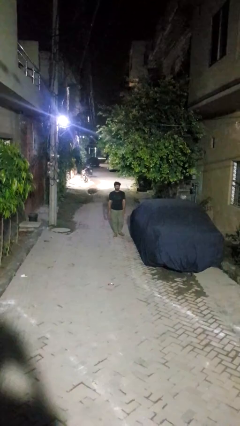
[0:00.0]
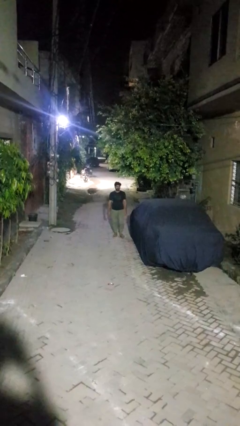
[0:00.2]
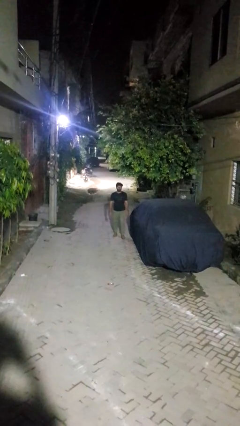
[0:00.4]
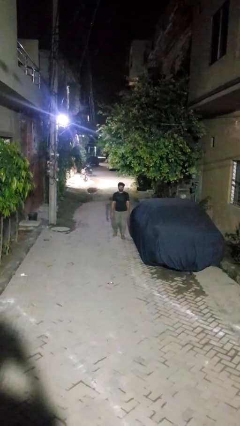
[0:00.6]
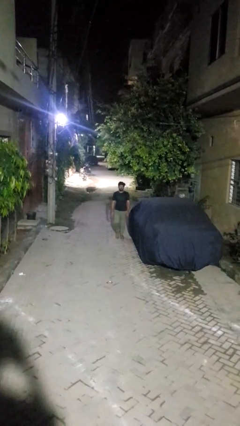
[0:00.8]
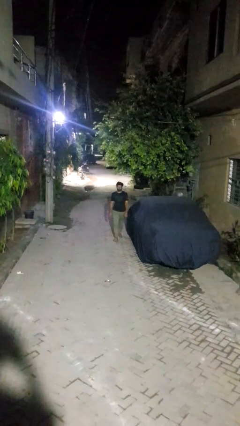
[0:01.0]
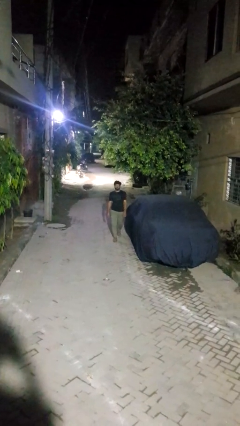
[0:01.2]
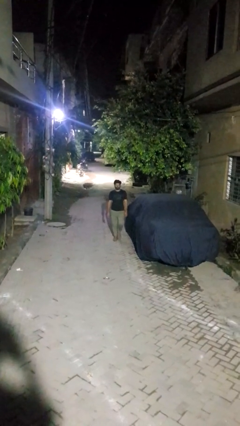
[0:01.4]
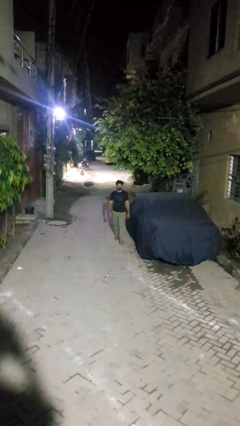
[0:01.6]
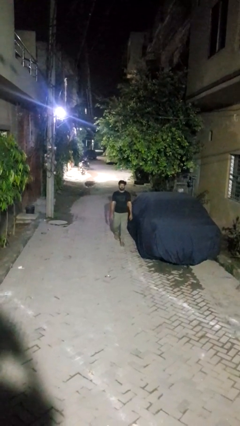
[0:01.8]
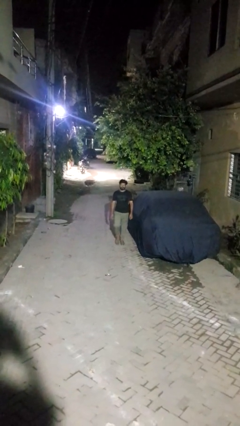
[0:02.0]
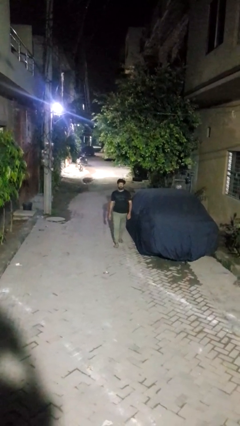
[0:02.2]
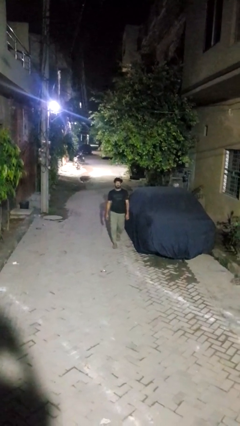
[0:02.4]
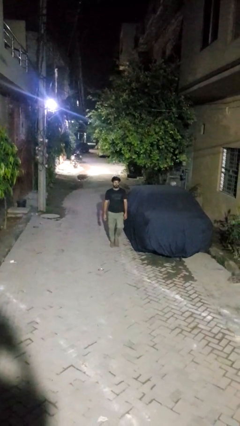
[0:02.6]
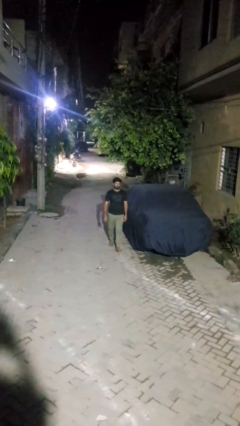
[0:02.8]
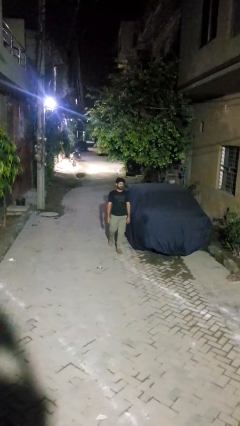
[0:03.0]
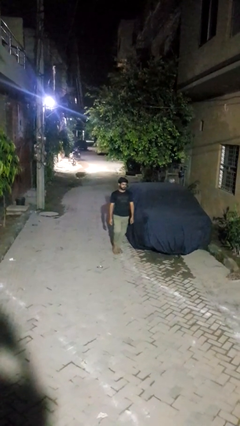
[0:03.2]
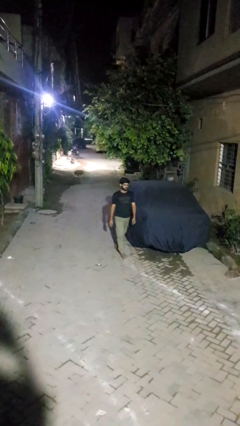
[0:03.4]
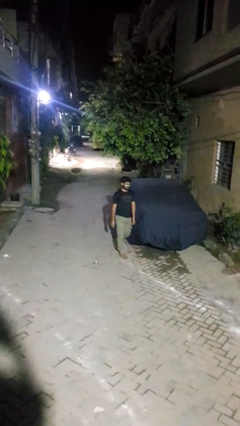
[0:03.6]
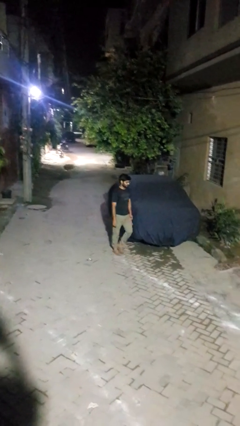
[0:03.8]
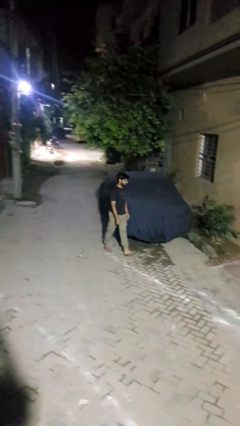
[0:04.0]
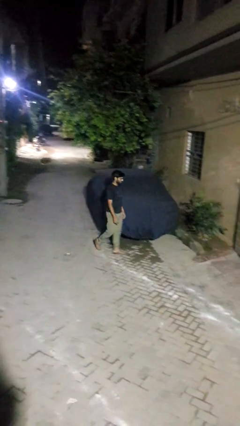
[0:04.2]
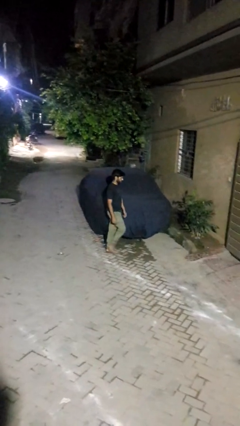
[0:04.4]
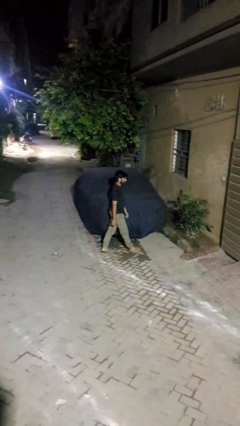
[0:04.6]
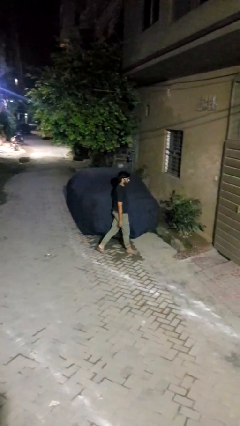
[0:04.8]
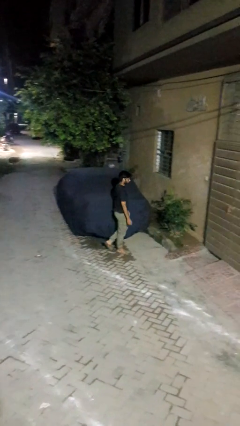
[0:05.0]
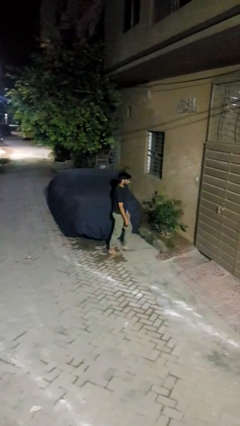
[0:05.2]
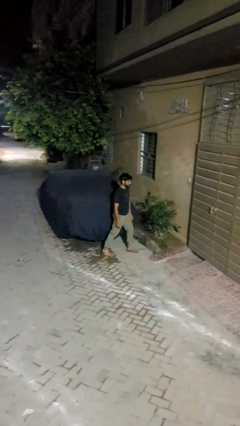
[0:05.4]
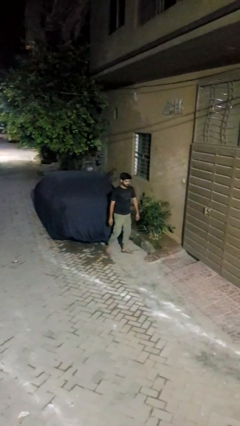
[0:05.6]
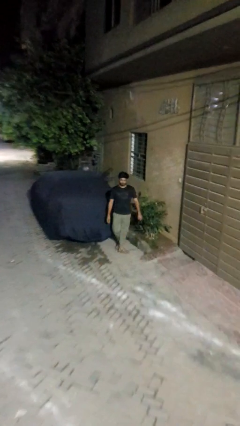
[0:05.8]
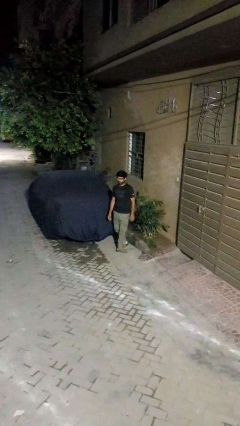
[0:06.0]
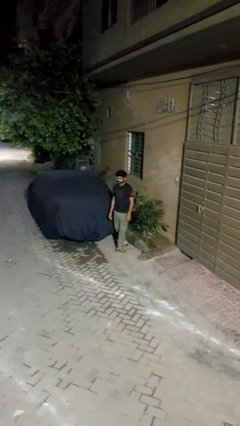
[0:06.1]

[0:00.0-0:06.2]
person walks around car

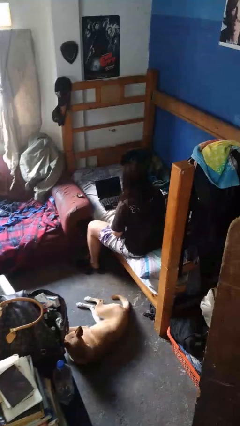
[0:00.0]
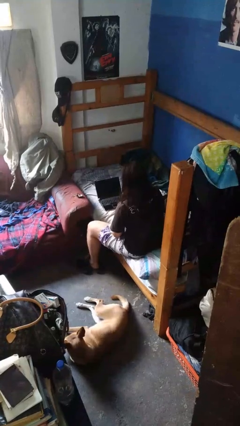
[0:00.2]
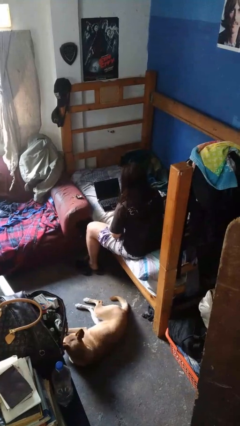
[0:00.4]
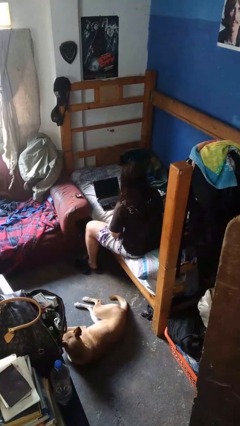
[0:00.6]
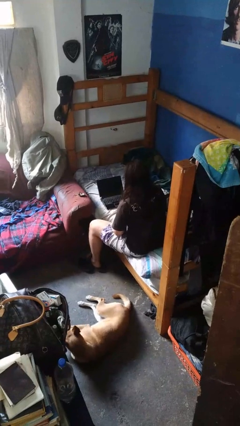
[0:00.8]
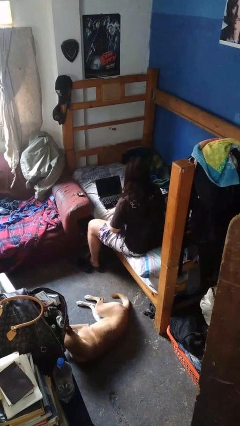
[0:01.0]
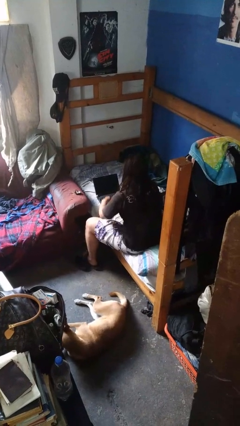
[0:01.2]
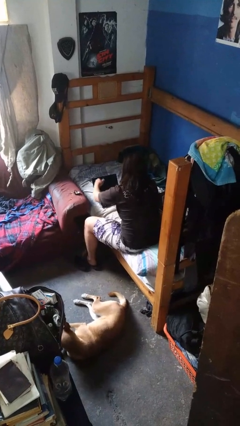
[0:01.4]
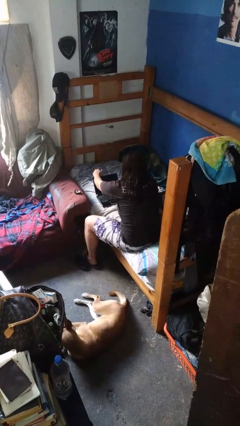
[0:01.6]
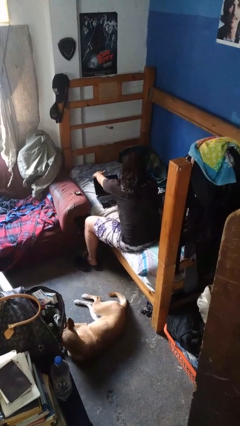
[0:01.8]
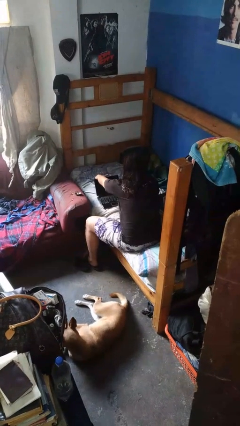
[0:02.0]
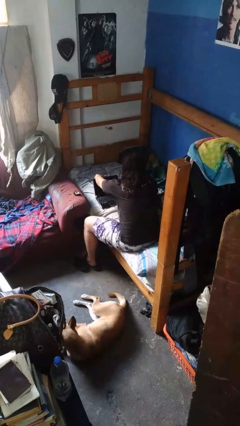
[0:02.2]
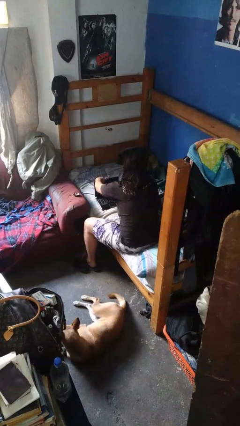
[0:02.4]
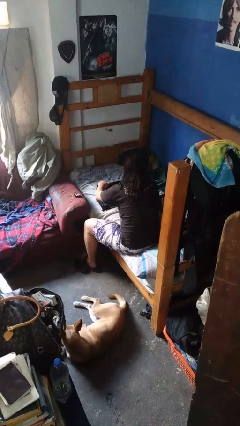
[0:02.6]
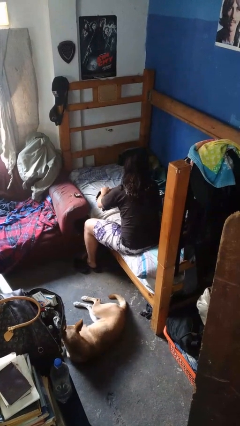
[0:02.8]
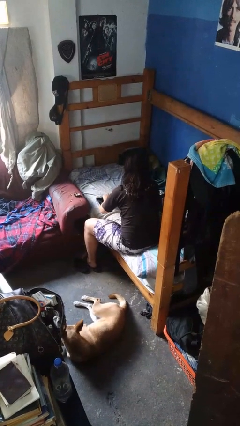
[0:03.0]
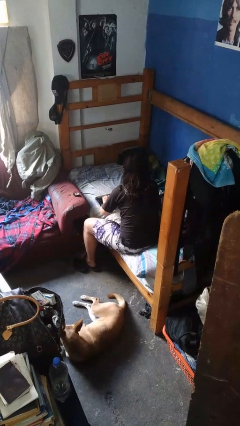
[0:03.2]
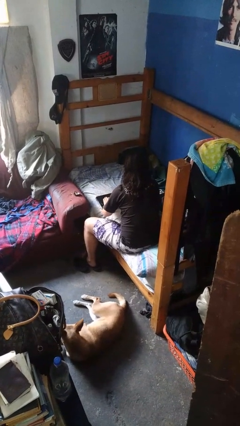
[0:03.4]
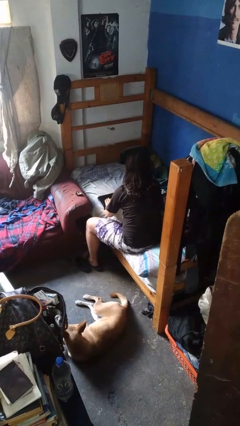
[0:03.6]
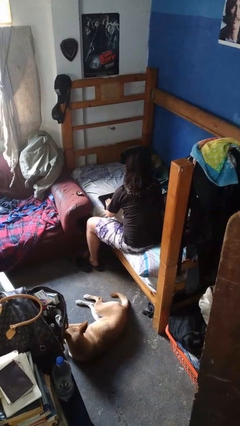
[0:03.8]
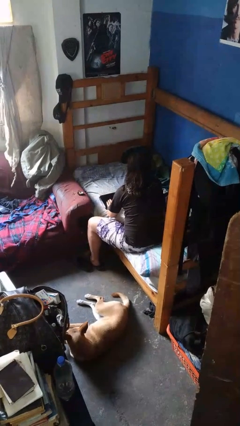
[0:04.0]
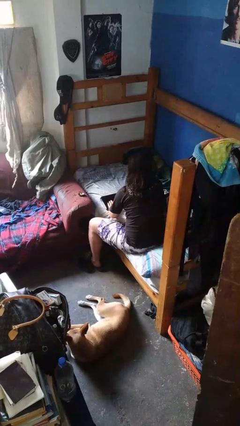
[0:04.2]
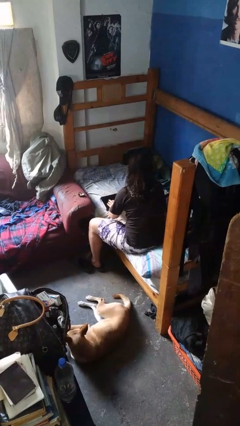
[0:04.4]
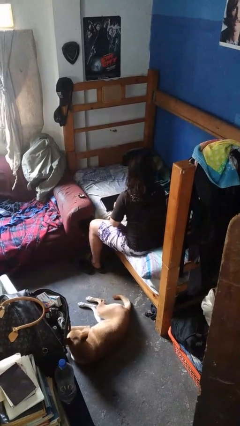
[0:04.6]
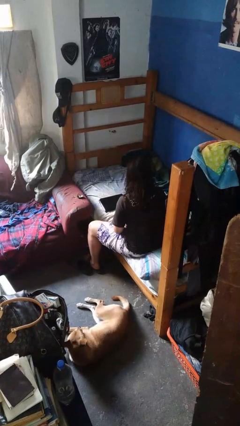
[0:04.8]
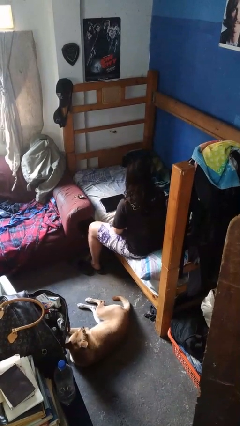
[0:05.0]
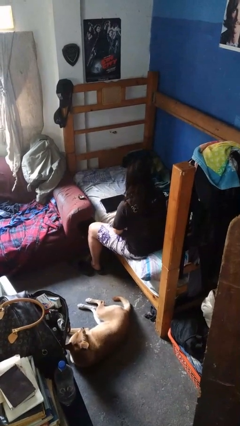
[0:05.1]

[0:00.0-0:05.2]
person closes laptop

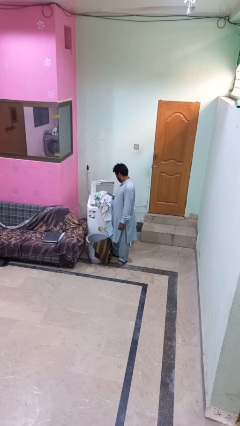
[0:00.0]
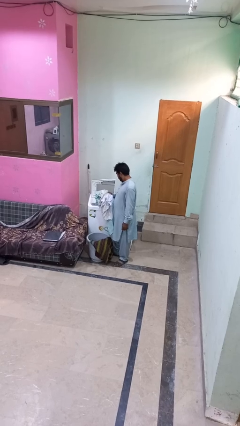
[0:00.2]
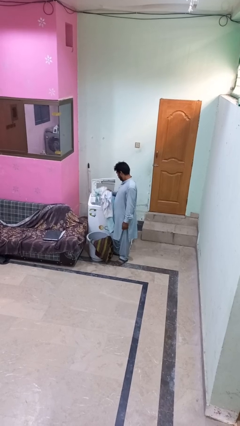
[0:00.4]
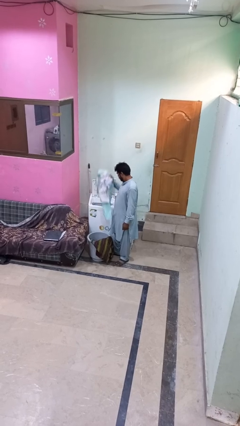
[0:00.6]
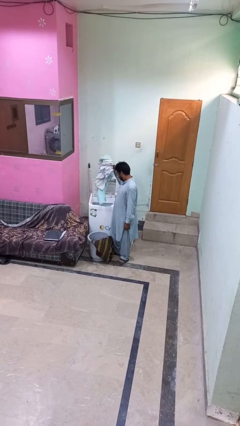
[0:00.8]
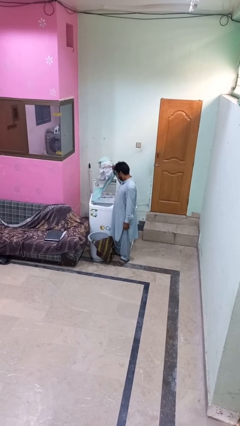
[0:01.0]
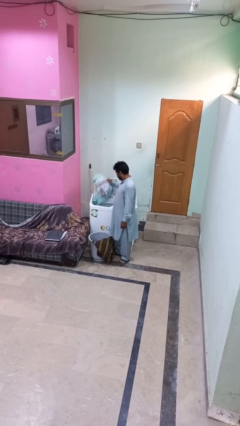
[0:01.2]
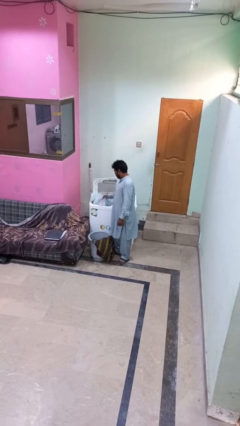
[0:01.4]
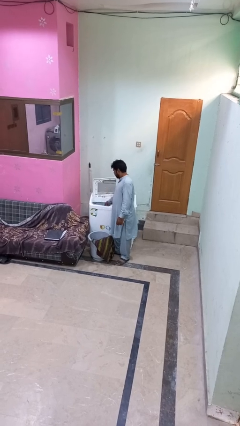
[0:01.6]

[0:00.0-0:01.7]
person loads clotheswasher

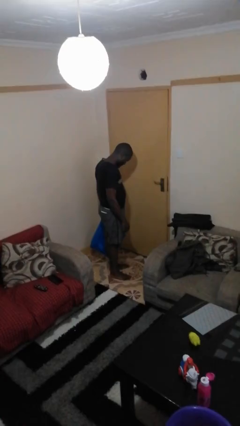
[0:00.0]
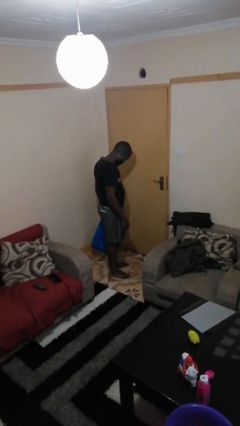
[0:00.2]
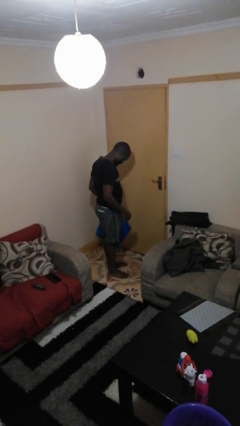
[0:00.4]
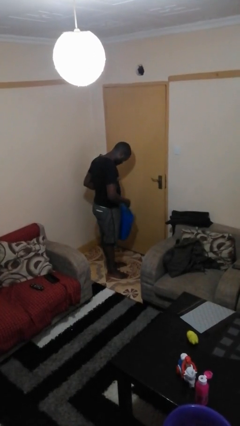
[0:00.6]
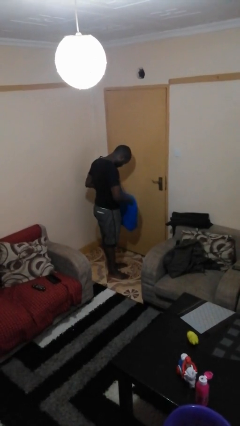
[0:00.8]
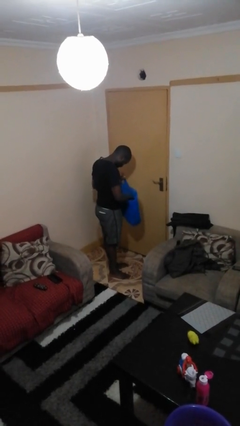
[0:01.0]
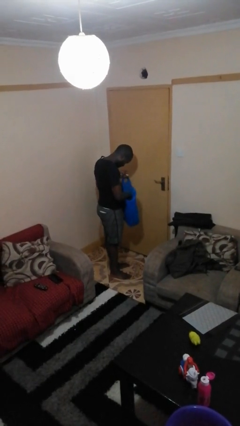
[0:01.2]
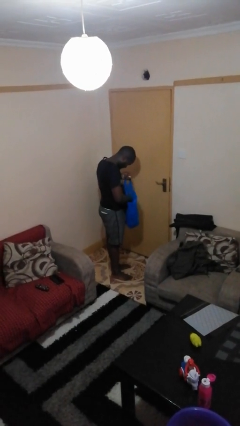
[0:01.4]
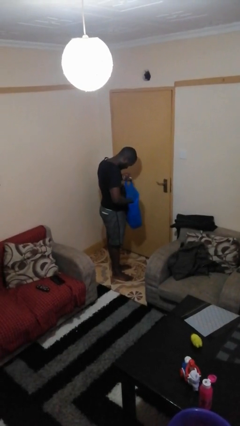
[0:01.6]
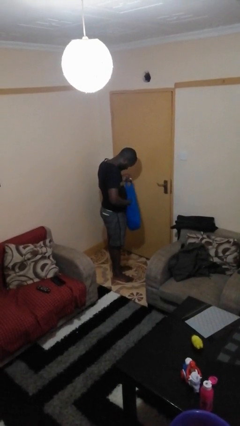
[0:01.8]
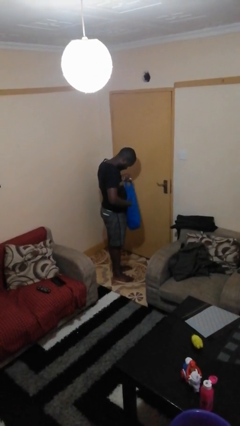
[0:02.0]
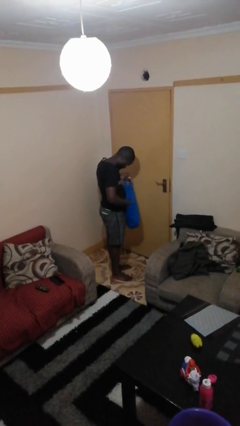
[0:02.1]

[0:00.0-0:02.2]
person searches in bag

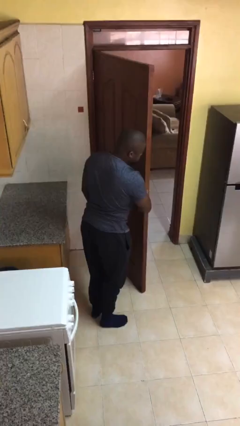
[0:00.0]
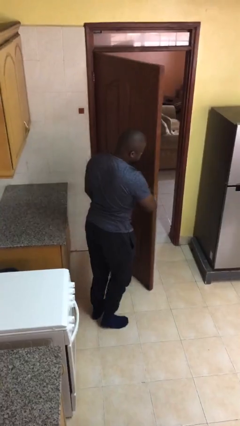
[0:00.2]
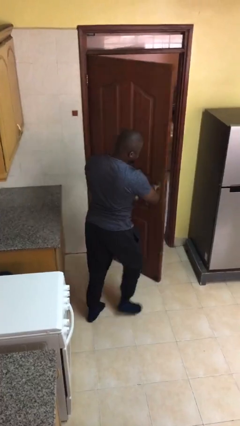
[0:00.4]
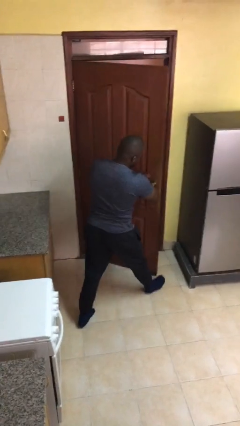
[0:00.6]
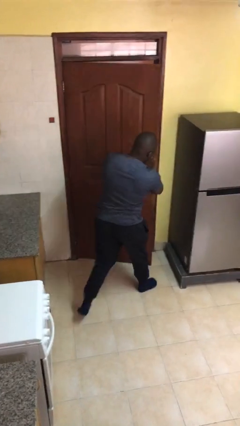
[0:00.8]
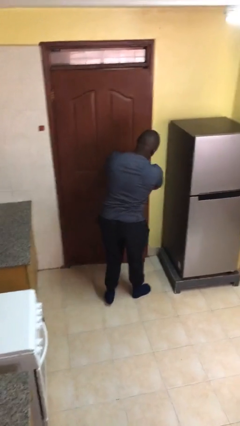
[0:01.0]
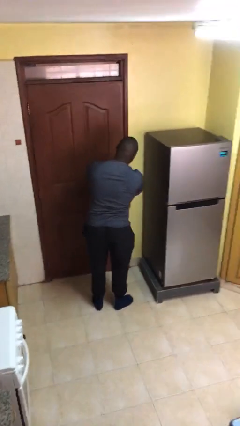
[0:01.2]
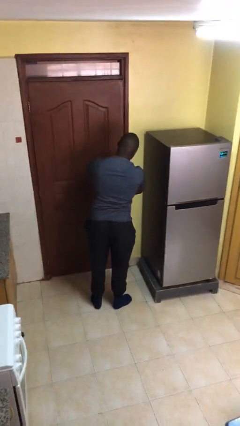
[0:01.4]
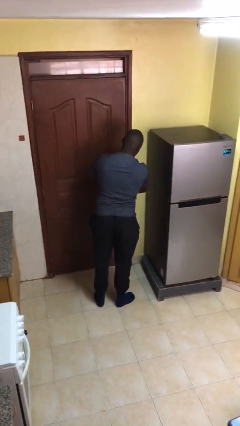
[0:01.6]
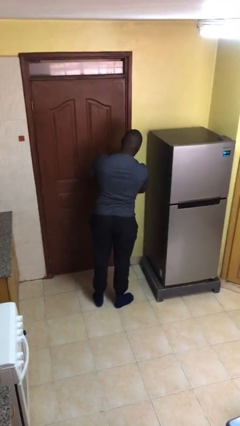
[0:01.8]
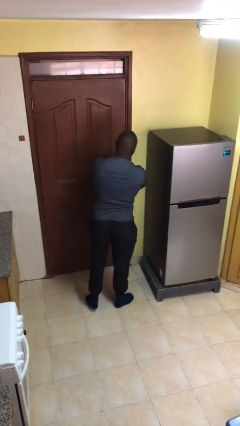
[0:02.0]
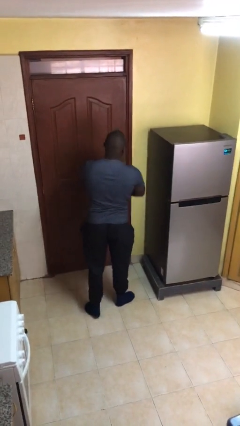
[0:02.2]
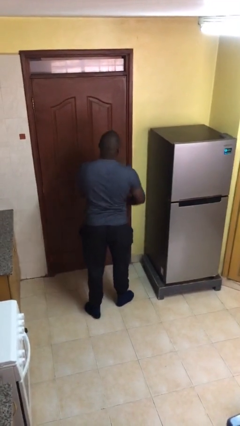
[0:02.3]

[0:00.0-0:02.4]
person closes facility door
